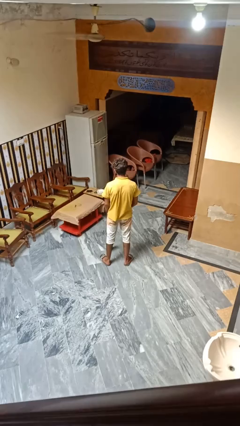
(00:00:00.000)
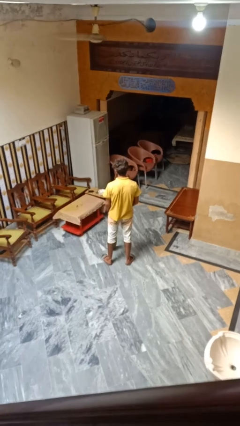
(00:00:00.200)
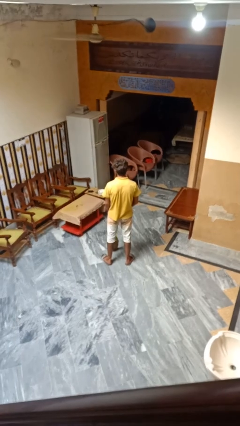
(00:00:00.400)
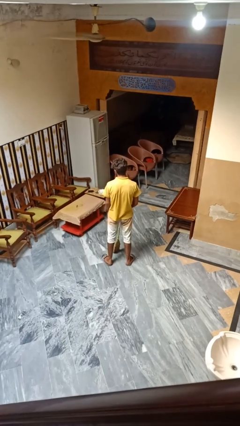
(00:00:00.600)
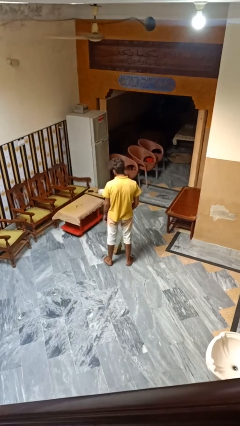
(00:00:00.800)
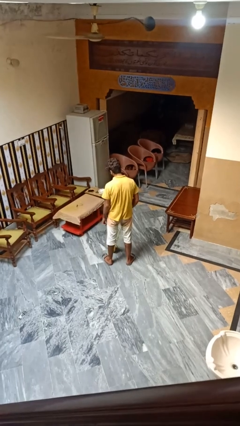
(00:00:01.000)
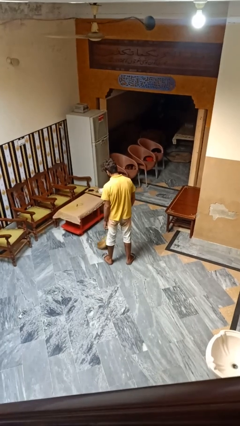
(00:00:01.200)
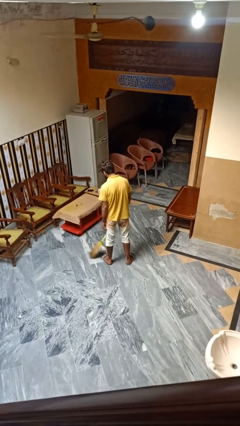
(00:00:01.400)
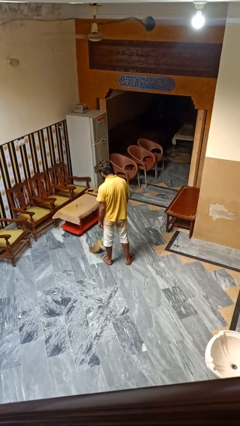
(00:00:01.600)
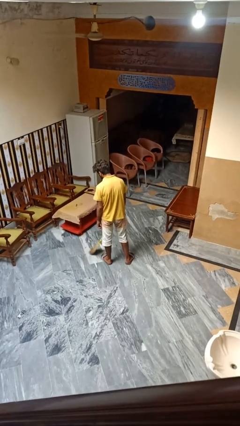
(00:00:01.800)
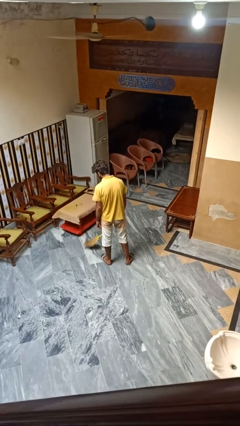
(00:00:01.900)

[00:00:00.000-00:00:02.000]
person mops

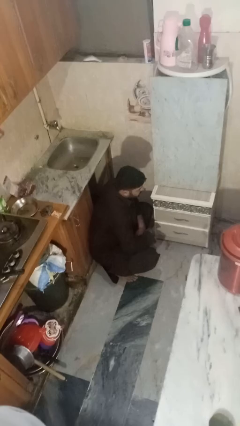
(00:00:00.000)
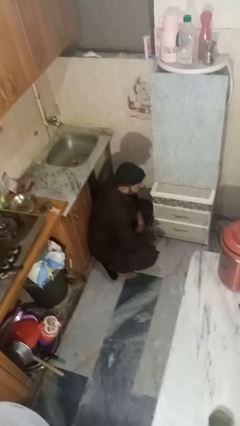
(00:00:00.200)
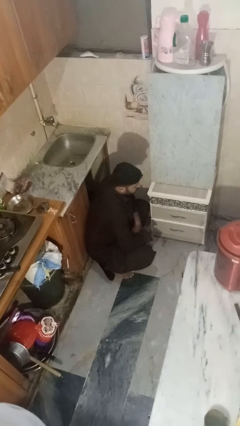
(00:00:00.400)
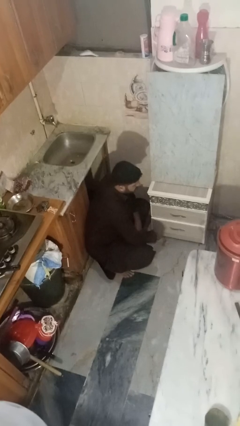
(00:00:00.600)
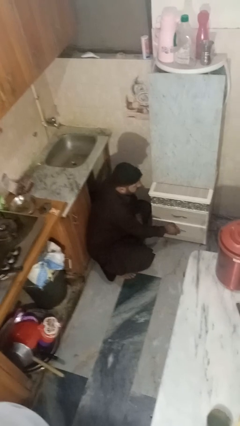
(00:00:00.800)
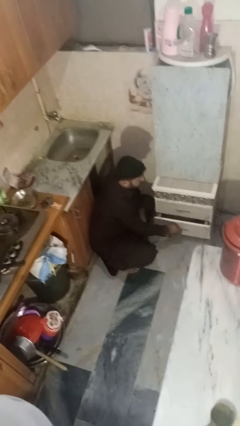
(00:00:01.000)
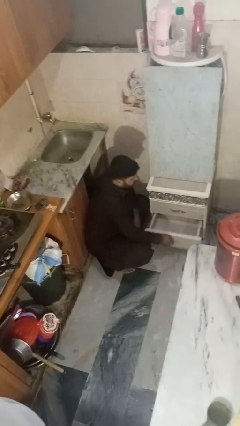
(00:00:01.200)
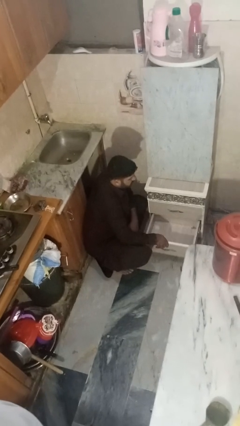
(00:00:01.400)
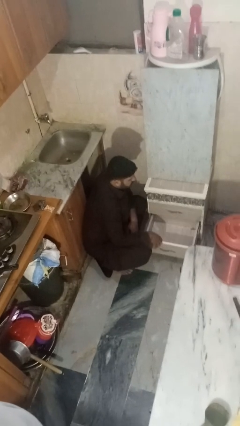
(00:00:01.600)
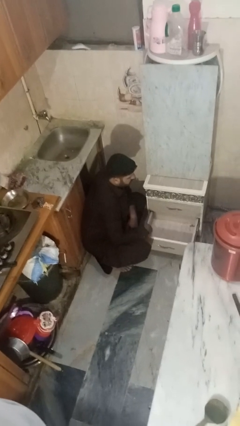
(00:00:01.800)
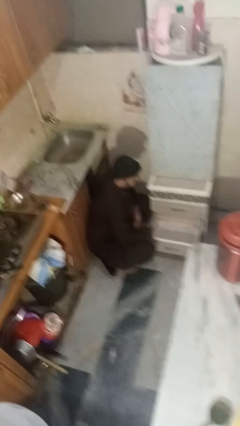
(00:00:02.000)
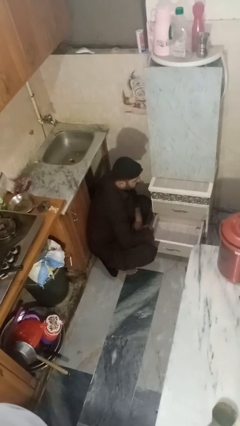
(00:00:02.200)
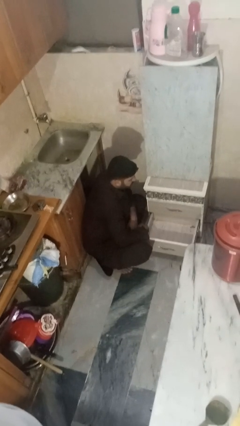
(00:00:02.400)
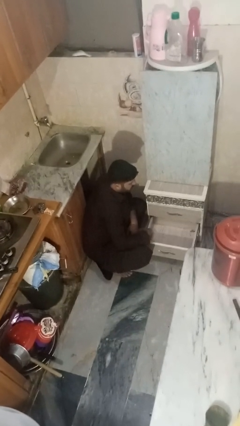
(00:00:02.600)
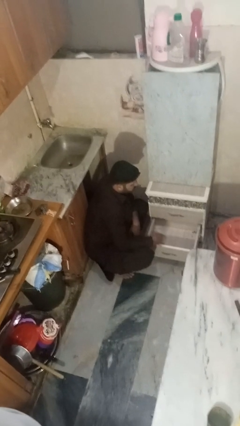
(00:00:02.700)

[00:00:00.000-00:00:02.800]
person opens kitchen drawer

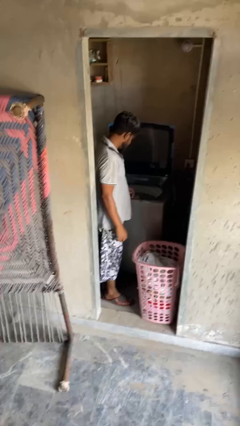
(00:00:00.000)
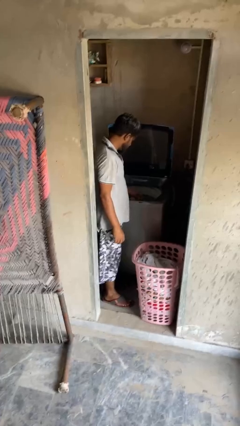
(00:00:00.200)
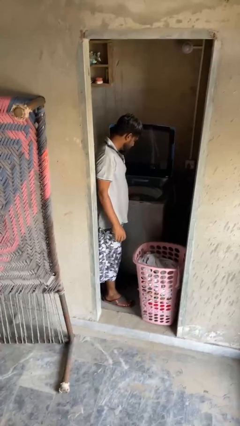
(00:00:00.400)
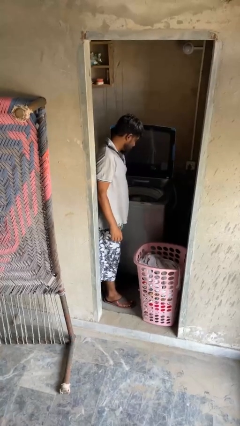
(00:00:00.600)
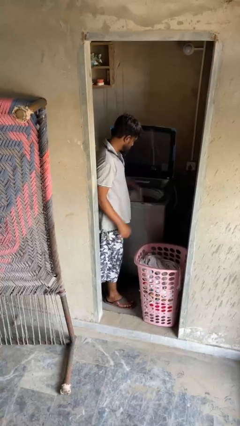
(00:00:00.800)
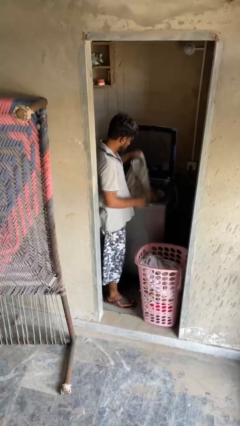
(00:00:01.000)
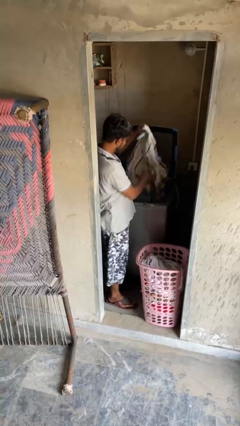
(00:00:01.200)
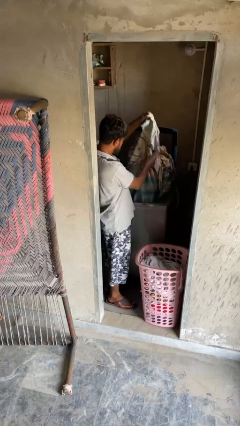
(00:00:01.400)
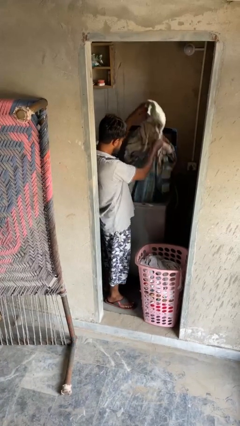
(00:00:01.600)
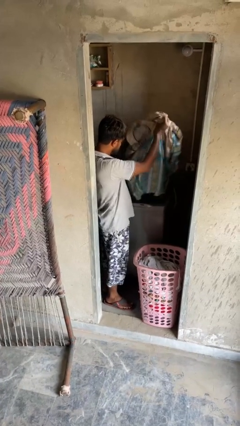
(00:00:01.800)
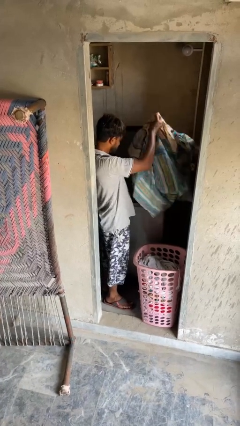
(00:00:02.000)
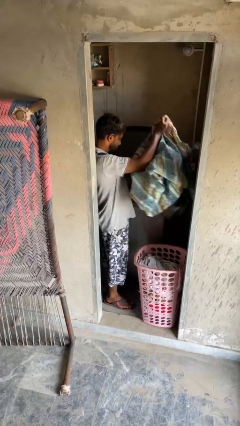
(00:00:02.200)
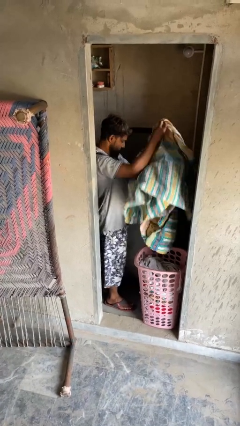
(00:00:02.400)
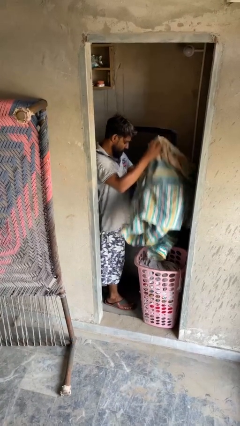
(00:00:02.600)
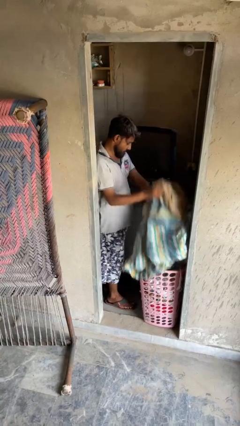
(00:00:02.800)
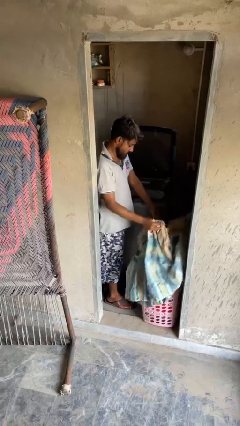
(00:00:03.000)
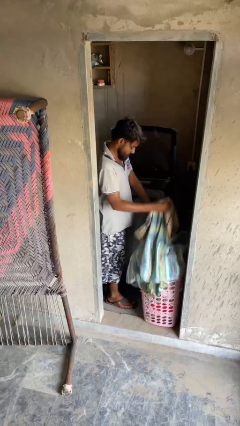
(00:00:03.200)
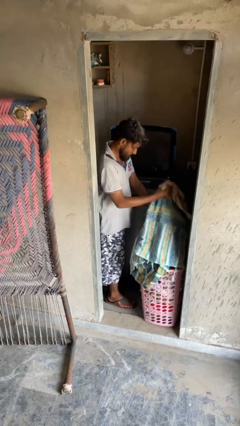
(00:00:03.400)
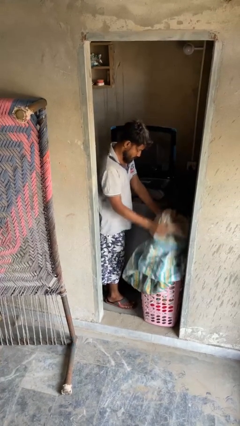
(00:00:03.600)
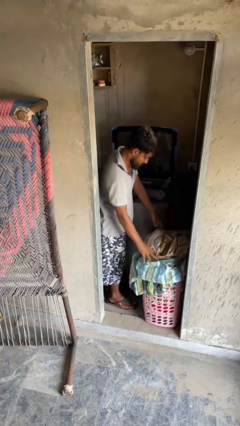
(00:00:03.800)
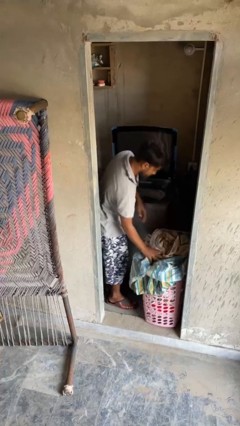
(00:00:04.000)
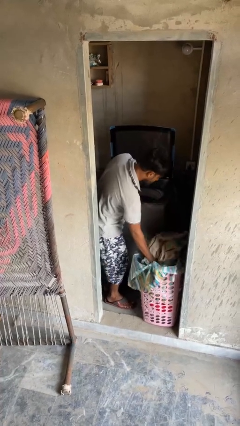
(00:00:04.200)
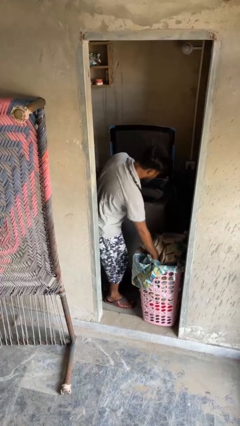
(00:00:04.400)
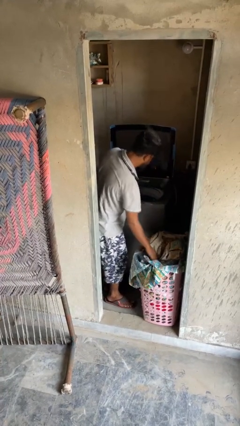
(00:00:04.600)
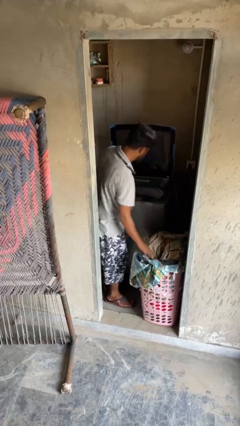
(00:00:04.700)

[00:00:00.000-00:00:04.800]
person loads clotheswasher

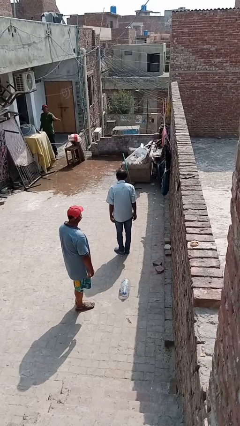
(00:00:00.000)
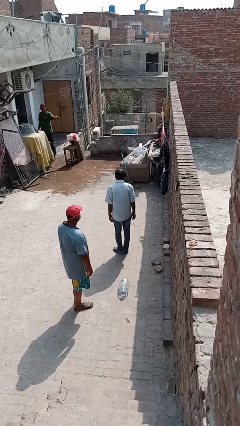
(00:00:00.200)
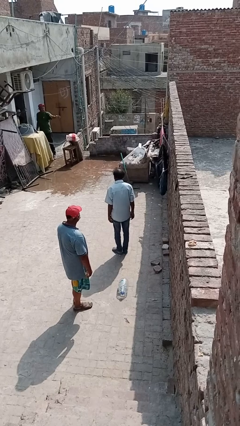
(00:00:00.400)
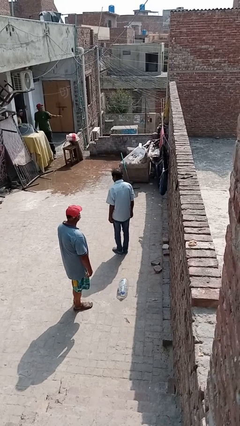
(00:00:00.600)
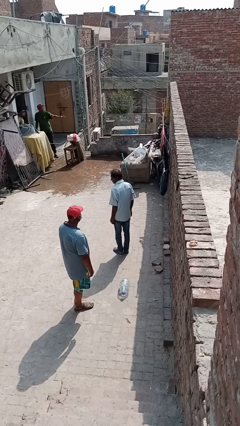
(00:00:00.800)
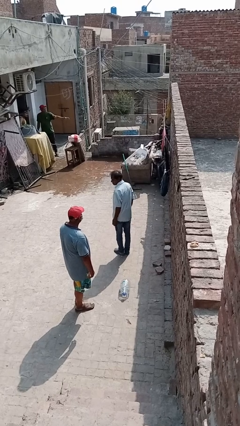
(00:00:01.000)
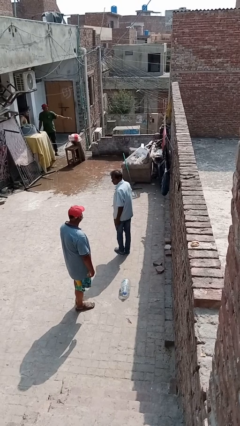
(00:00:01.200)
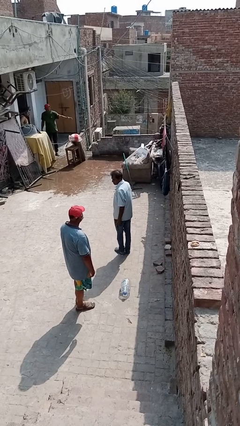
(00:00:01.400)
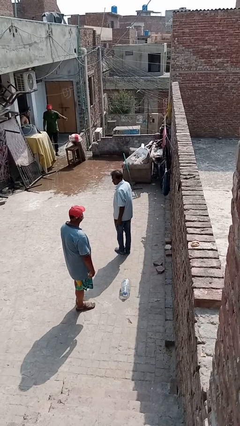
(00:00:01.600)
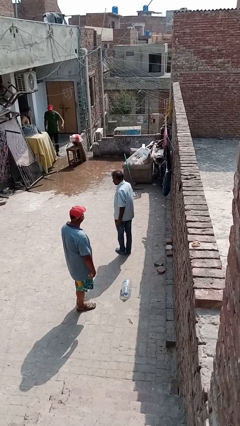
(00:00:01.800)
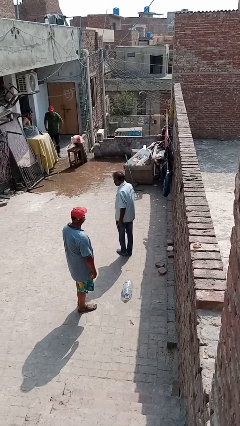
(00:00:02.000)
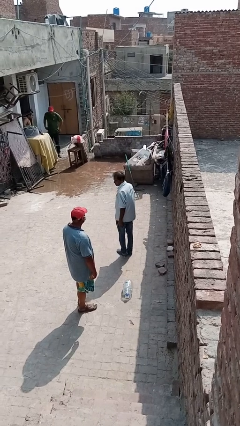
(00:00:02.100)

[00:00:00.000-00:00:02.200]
person looks over shoulder

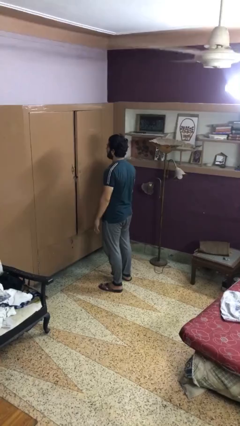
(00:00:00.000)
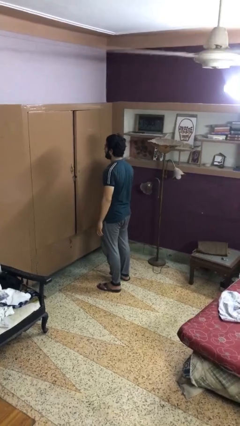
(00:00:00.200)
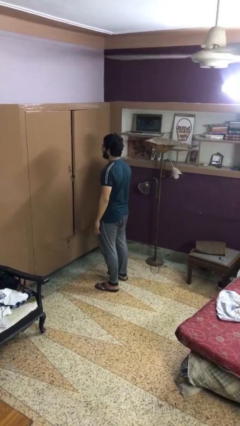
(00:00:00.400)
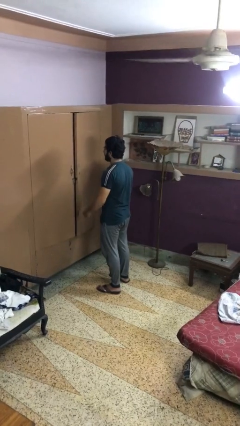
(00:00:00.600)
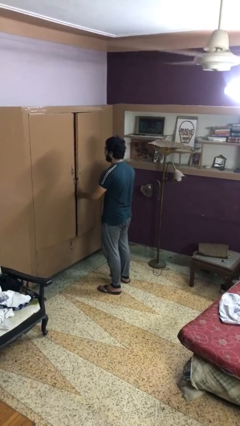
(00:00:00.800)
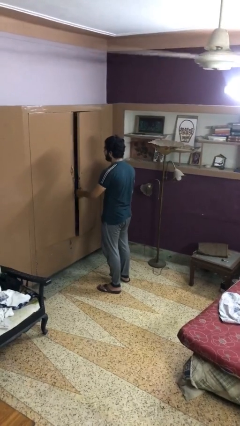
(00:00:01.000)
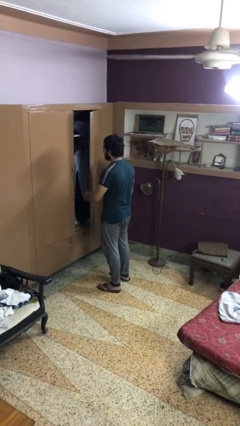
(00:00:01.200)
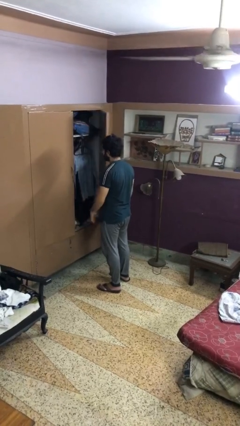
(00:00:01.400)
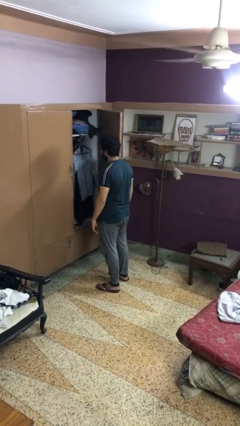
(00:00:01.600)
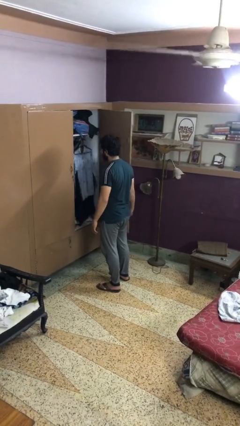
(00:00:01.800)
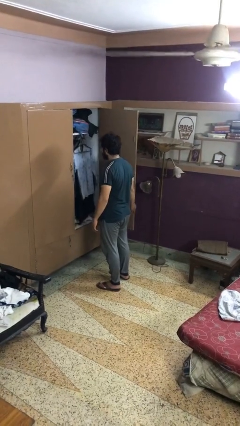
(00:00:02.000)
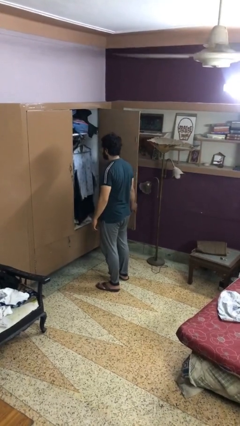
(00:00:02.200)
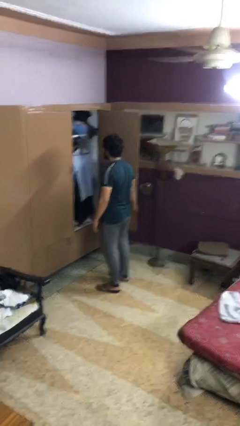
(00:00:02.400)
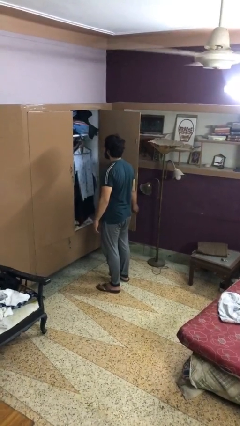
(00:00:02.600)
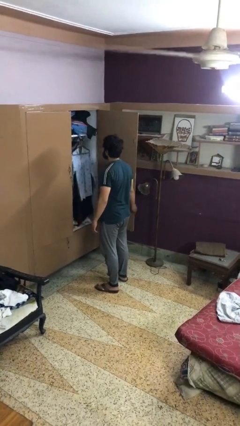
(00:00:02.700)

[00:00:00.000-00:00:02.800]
person opens closet door

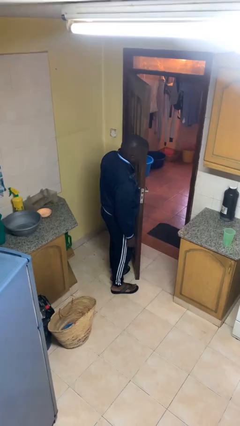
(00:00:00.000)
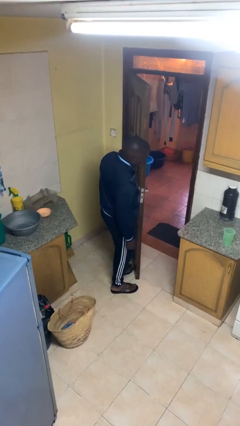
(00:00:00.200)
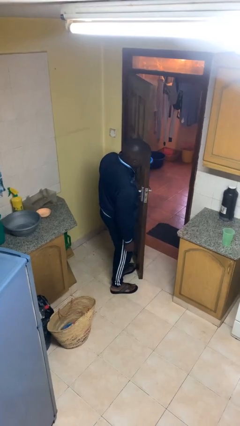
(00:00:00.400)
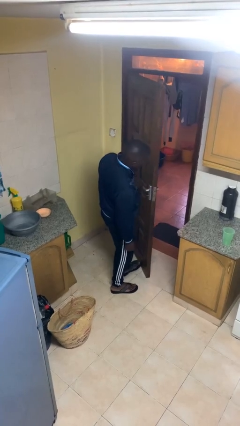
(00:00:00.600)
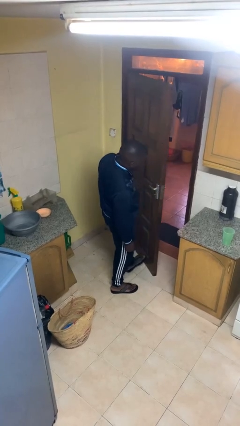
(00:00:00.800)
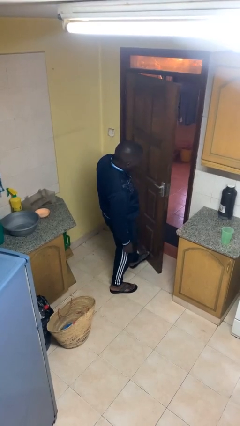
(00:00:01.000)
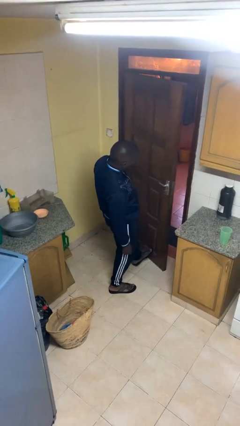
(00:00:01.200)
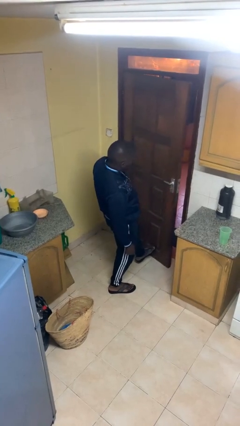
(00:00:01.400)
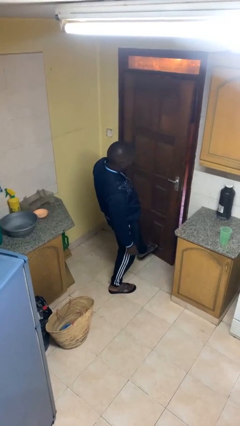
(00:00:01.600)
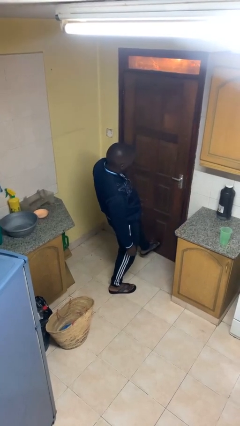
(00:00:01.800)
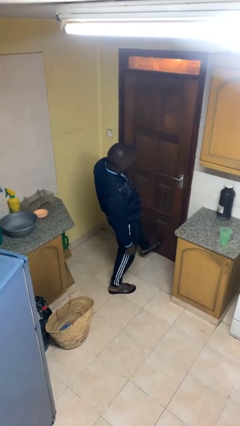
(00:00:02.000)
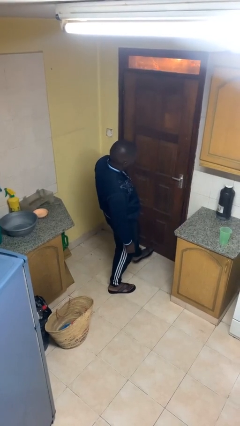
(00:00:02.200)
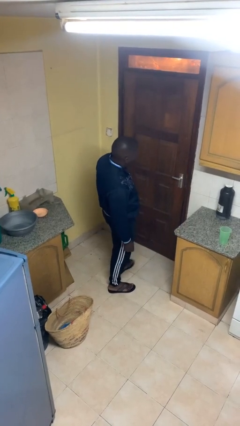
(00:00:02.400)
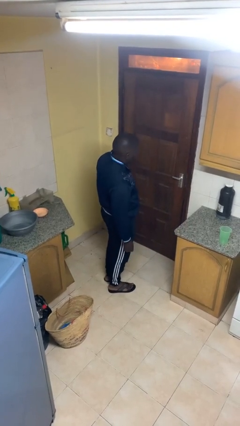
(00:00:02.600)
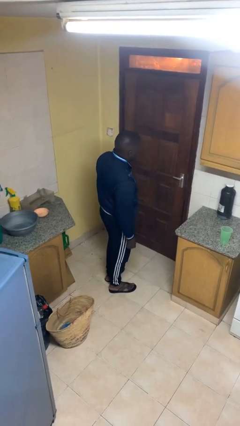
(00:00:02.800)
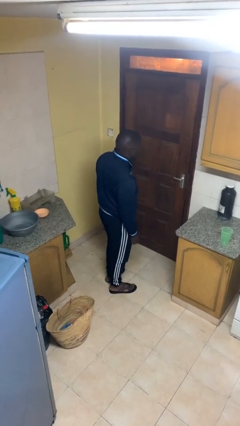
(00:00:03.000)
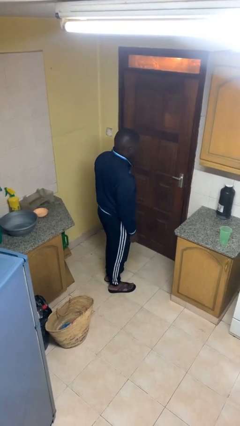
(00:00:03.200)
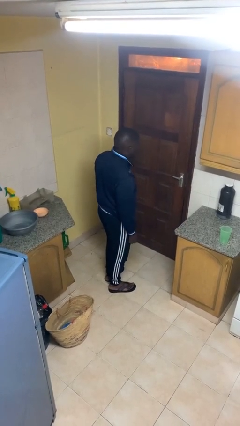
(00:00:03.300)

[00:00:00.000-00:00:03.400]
person closes door with foot
